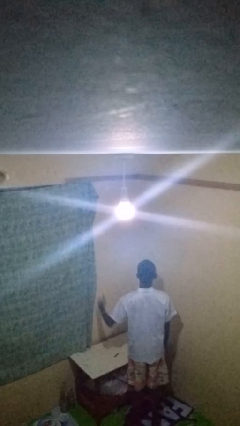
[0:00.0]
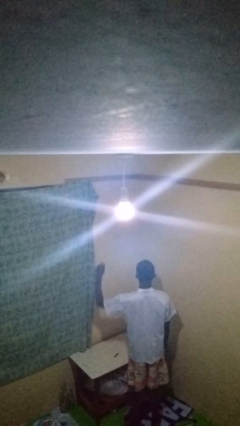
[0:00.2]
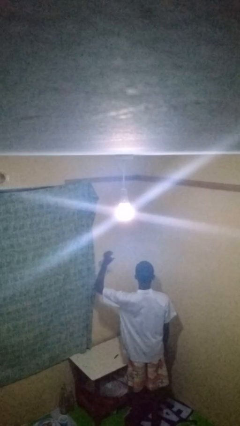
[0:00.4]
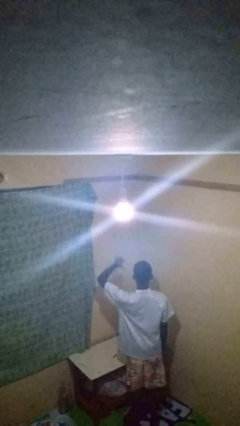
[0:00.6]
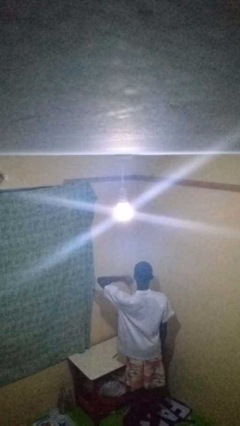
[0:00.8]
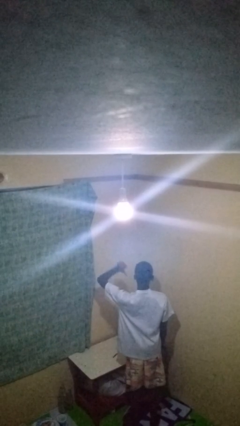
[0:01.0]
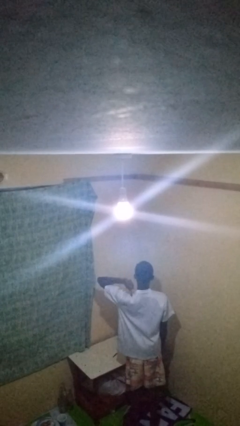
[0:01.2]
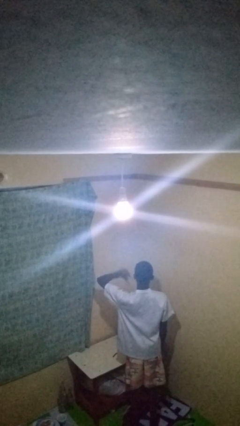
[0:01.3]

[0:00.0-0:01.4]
person gestures behind me

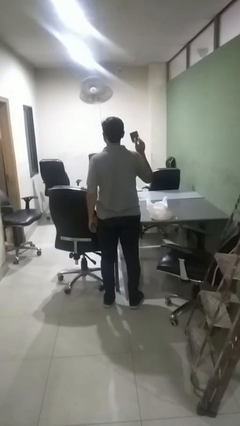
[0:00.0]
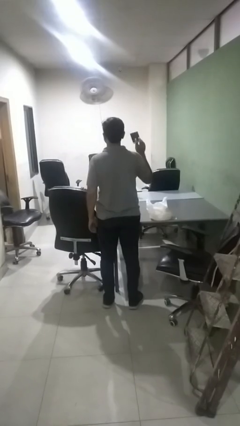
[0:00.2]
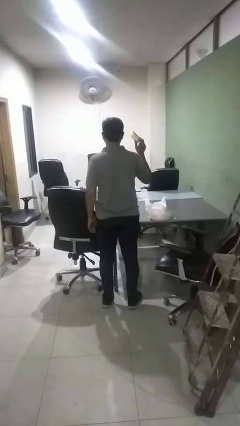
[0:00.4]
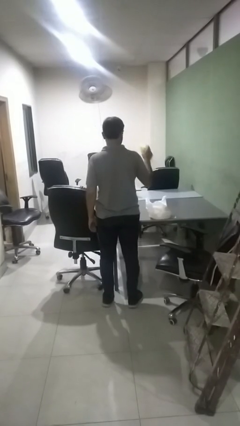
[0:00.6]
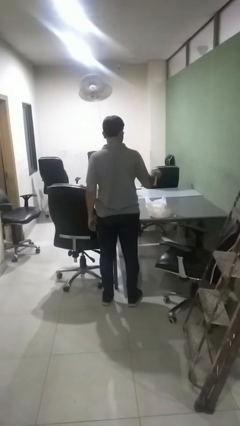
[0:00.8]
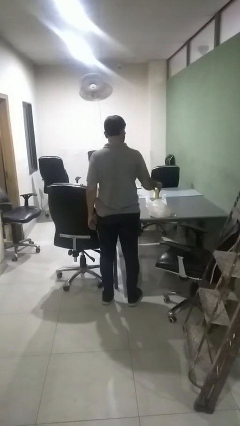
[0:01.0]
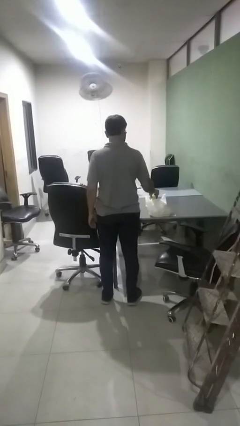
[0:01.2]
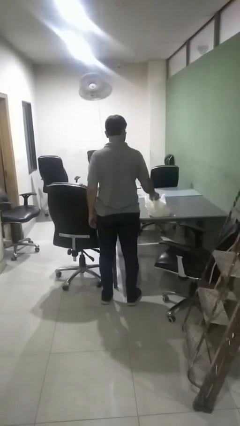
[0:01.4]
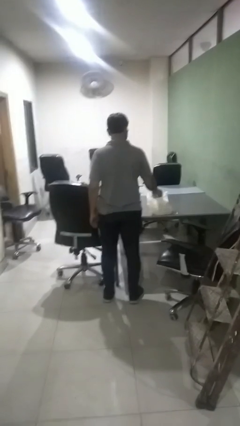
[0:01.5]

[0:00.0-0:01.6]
person puts object into bag

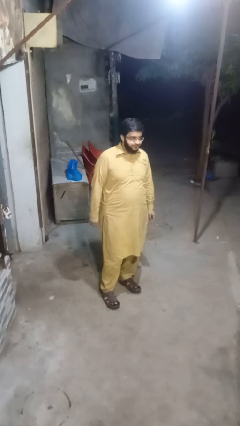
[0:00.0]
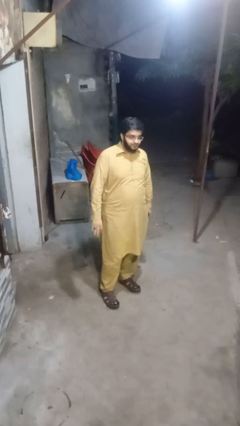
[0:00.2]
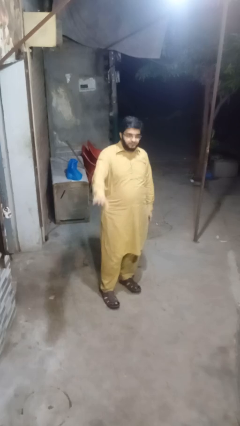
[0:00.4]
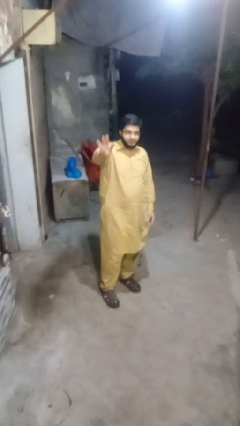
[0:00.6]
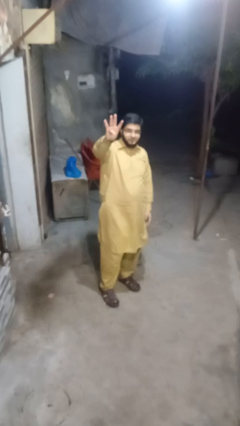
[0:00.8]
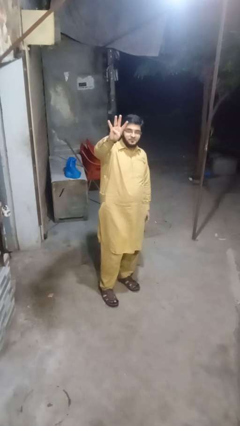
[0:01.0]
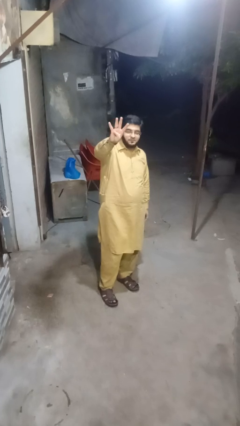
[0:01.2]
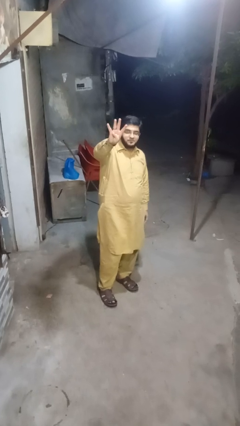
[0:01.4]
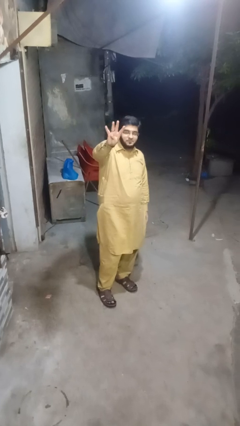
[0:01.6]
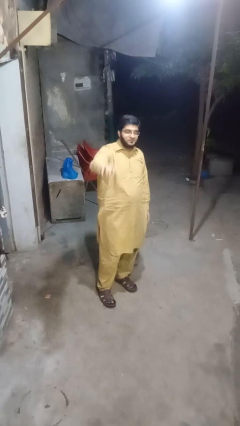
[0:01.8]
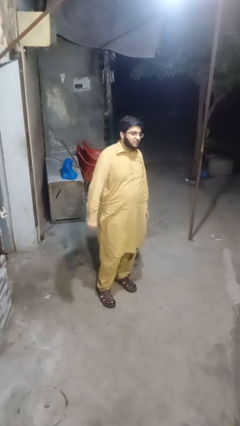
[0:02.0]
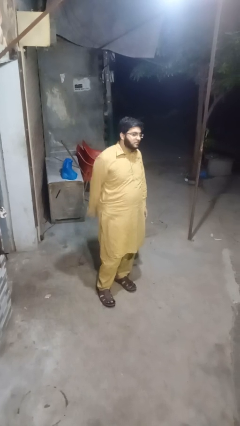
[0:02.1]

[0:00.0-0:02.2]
person gestures number four

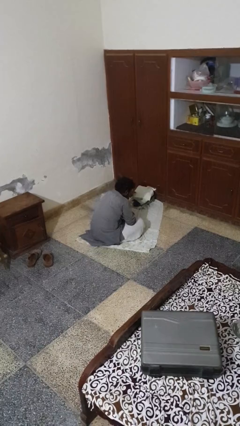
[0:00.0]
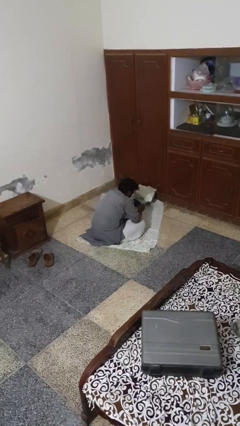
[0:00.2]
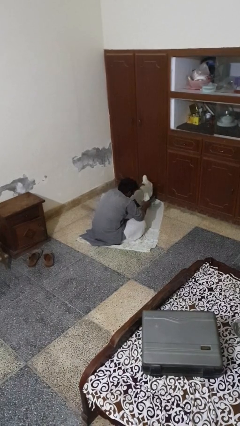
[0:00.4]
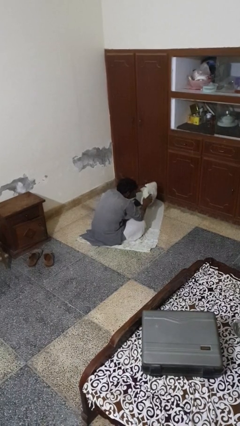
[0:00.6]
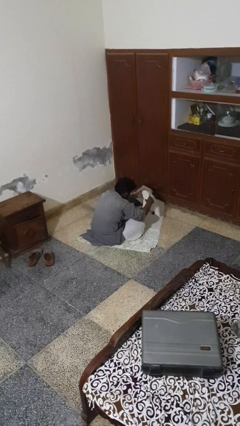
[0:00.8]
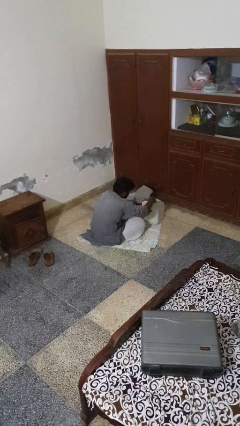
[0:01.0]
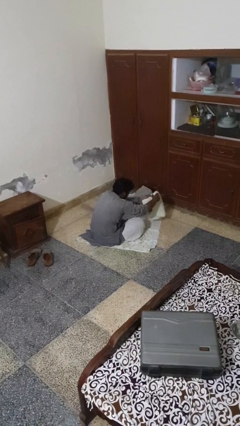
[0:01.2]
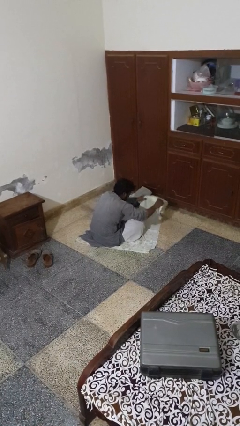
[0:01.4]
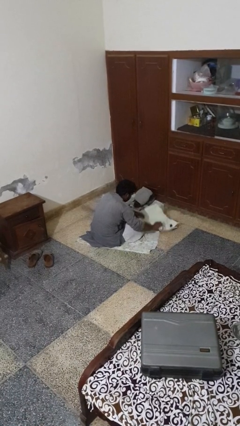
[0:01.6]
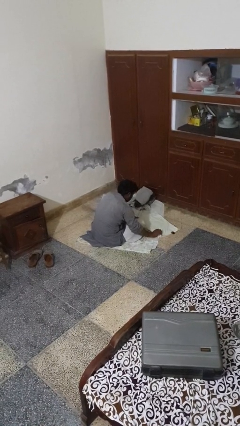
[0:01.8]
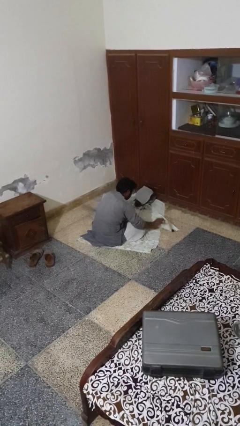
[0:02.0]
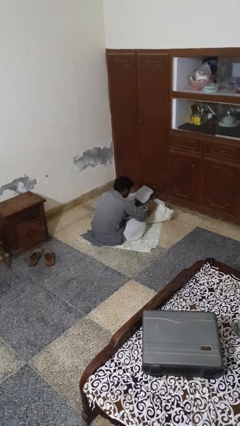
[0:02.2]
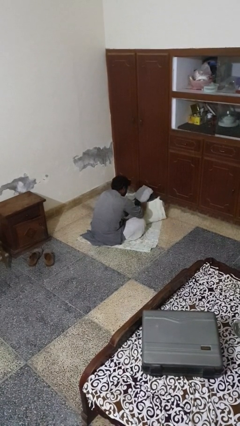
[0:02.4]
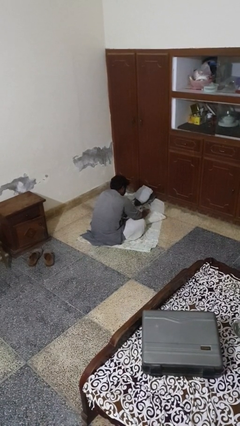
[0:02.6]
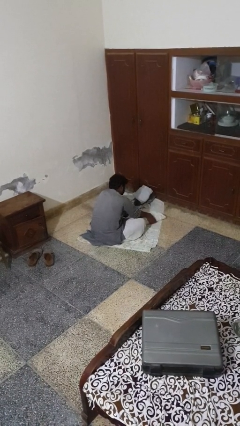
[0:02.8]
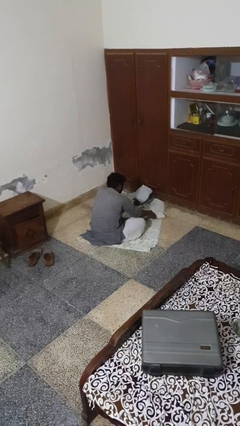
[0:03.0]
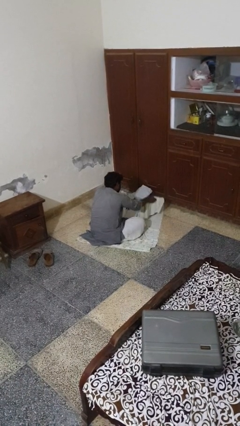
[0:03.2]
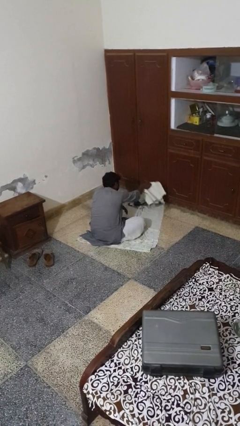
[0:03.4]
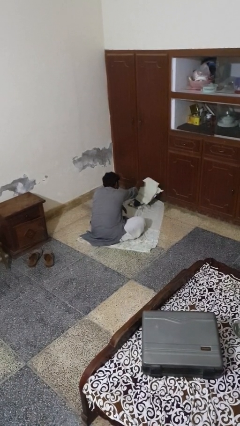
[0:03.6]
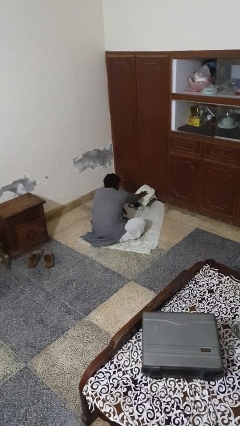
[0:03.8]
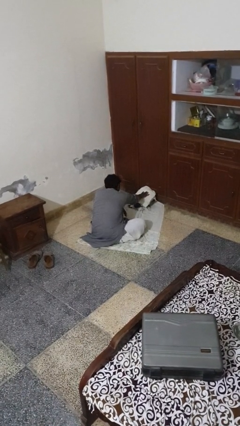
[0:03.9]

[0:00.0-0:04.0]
person folds towel

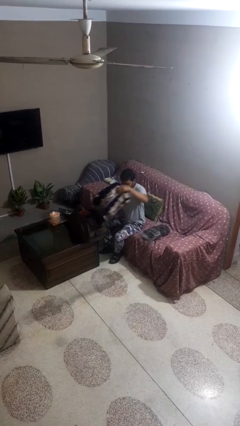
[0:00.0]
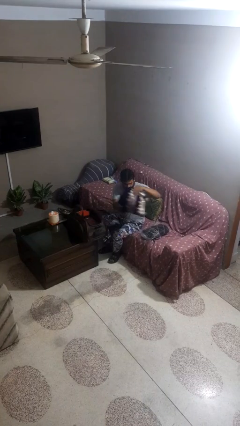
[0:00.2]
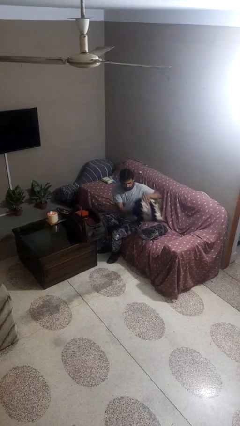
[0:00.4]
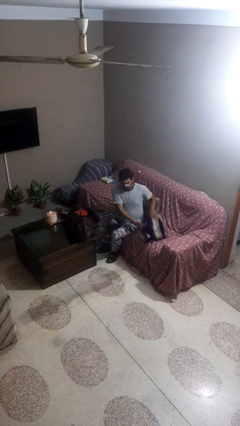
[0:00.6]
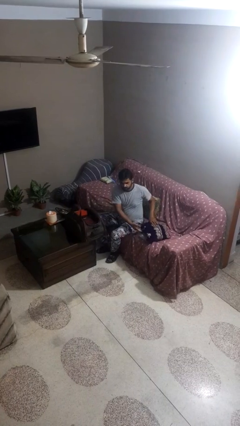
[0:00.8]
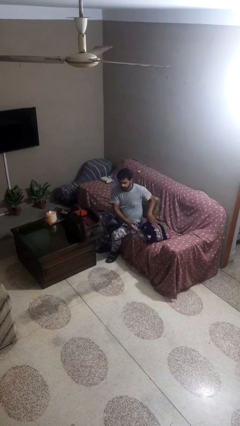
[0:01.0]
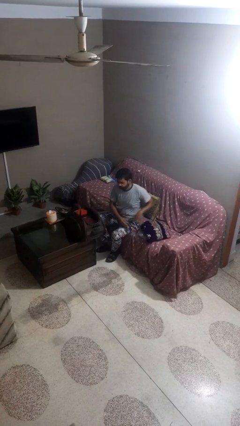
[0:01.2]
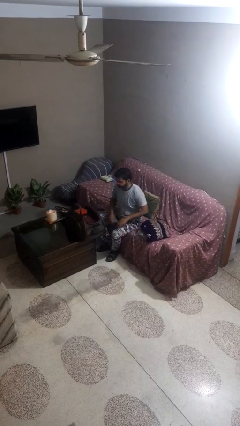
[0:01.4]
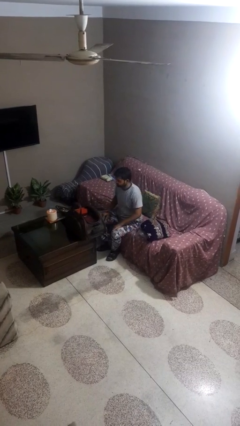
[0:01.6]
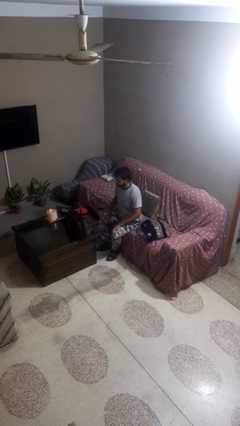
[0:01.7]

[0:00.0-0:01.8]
person unloads clothes from suitcase

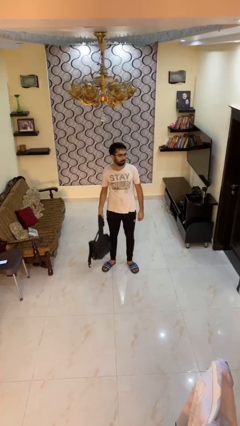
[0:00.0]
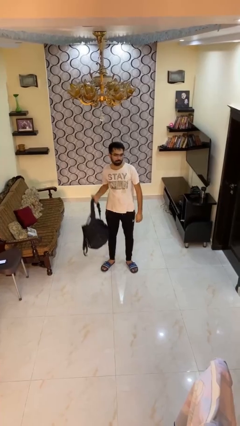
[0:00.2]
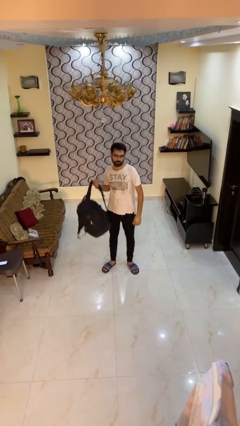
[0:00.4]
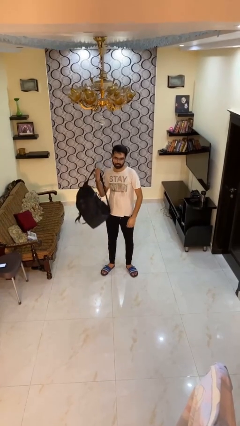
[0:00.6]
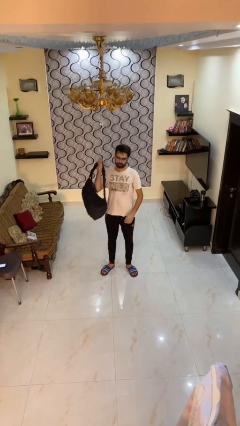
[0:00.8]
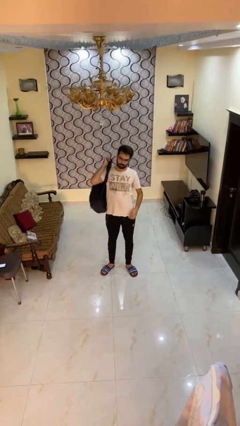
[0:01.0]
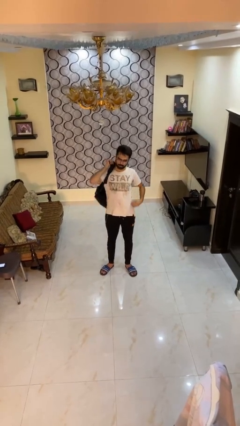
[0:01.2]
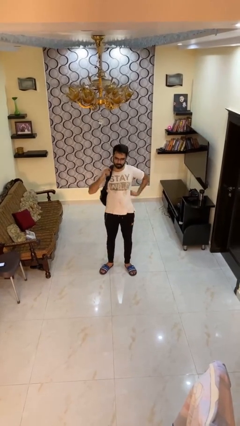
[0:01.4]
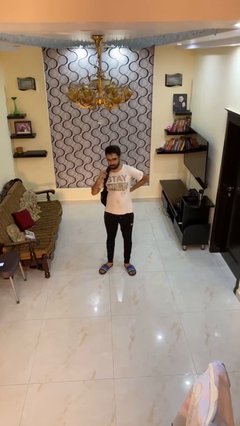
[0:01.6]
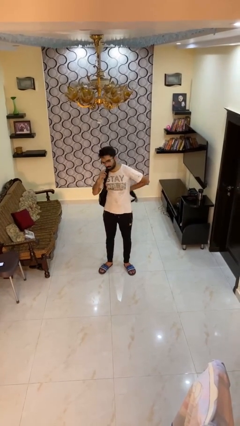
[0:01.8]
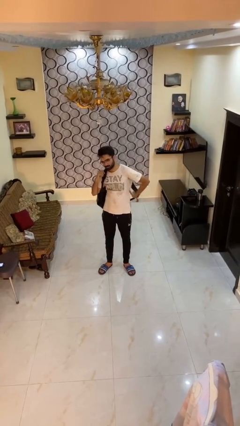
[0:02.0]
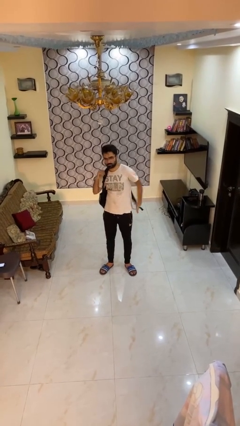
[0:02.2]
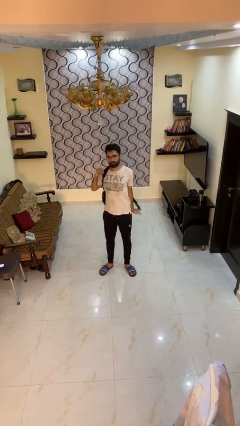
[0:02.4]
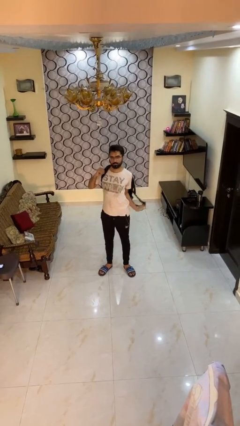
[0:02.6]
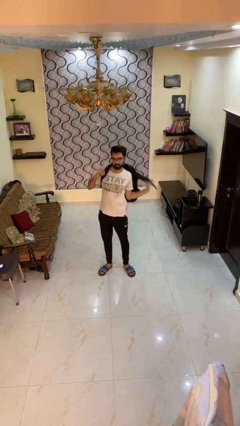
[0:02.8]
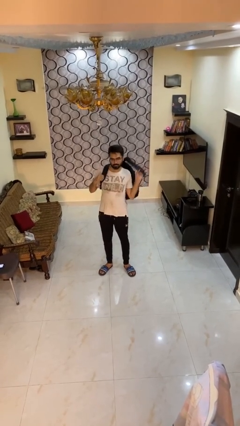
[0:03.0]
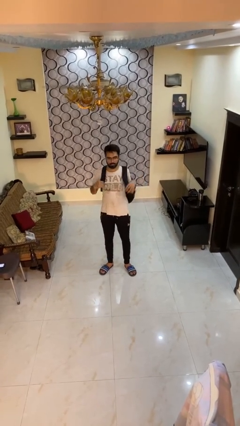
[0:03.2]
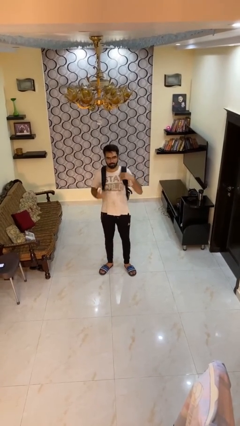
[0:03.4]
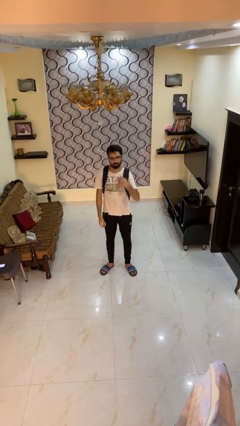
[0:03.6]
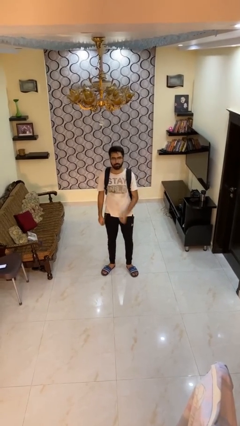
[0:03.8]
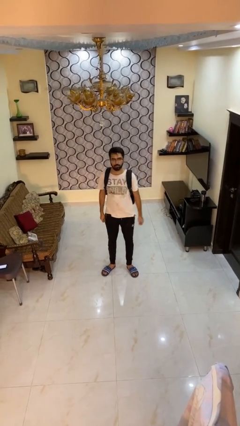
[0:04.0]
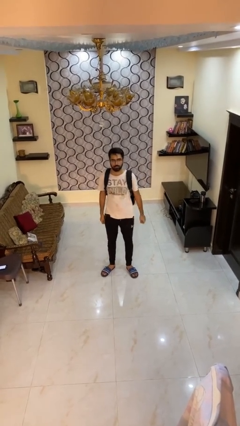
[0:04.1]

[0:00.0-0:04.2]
person puts on backpack

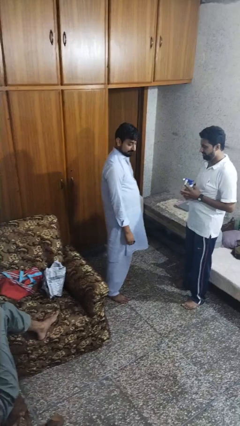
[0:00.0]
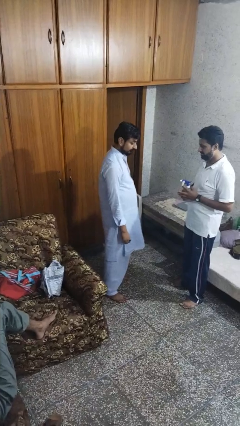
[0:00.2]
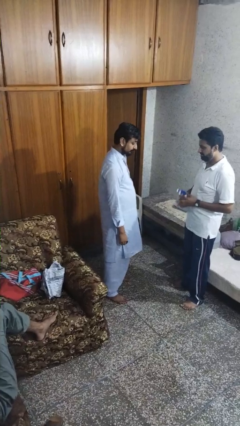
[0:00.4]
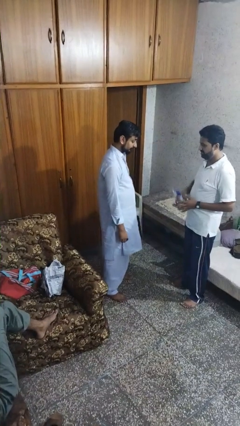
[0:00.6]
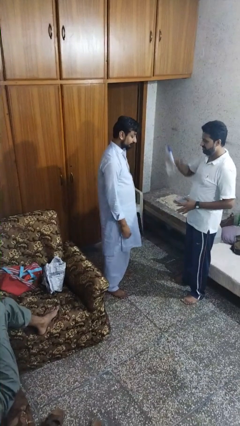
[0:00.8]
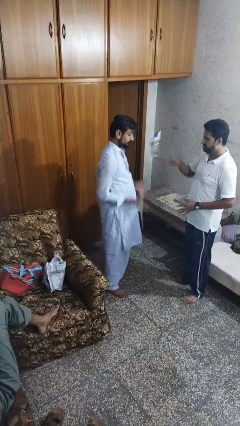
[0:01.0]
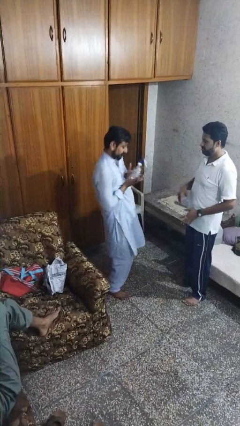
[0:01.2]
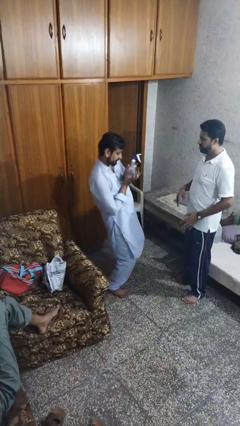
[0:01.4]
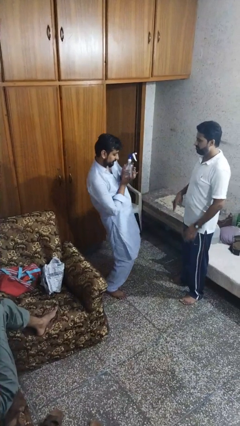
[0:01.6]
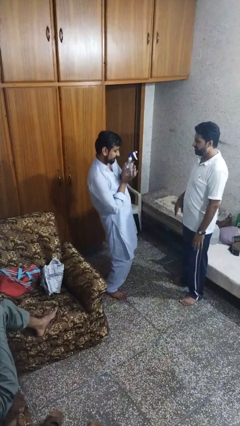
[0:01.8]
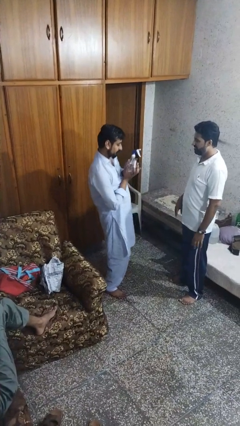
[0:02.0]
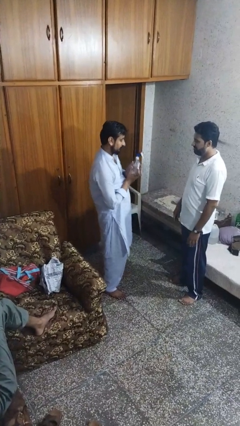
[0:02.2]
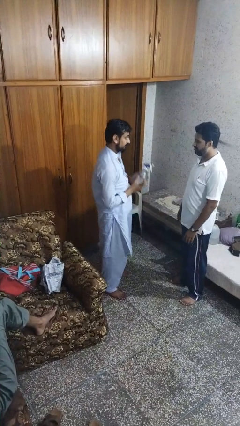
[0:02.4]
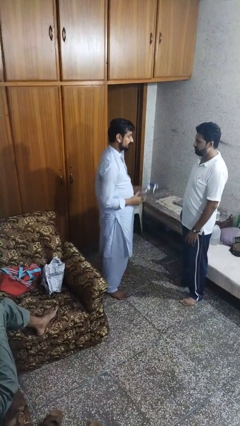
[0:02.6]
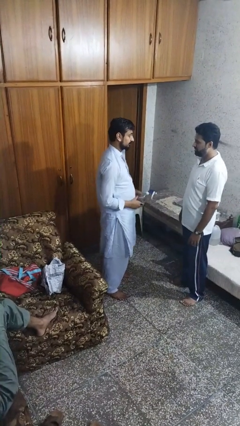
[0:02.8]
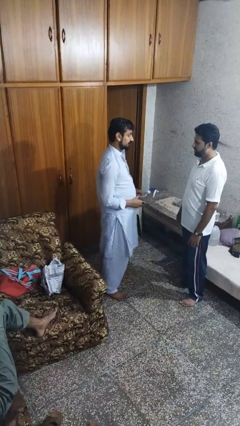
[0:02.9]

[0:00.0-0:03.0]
person catches object from person
